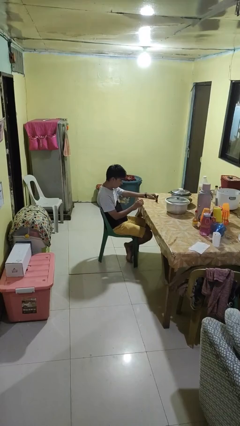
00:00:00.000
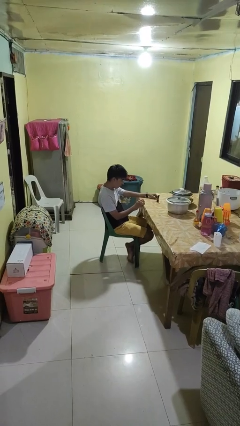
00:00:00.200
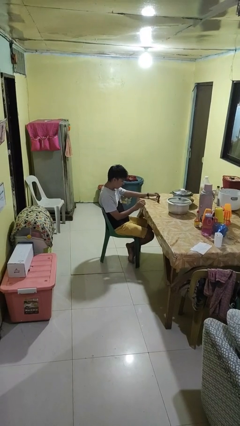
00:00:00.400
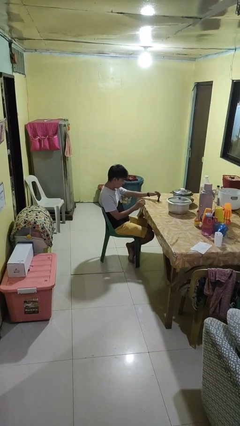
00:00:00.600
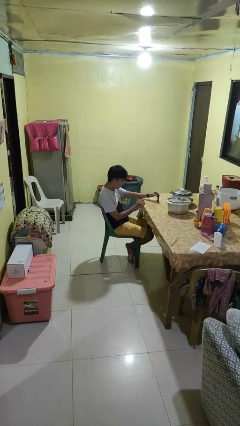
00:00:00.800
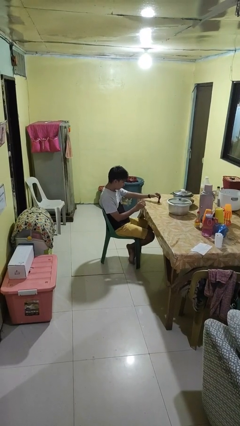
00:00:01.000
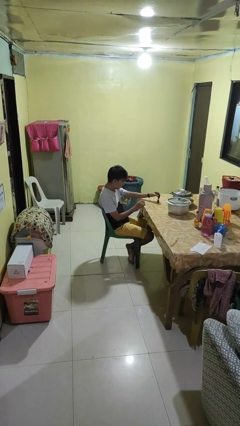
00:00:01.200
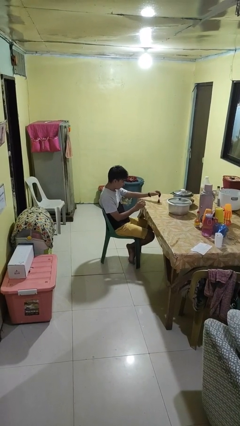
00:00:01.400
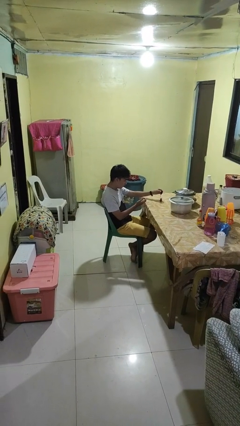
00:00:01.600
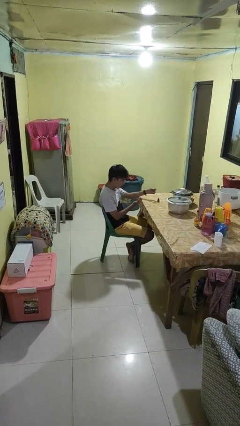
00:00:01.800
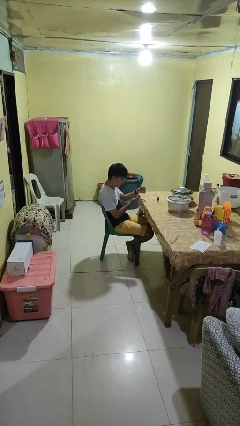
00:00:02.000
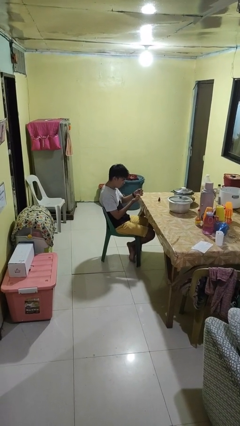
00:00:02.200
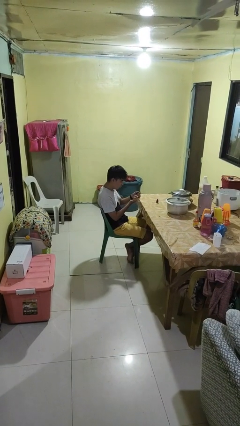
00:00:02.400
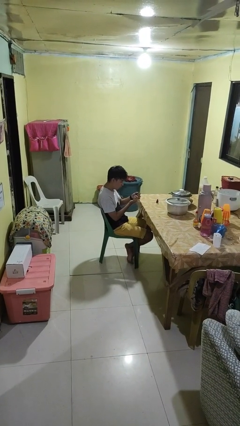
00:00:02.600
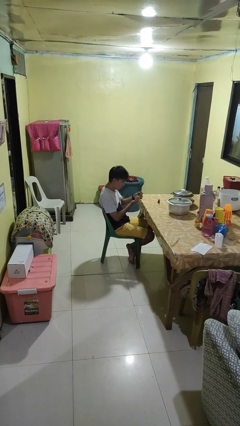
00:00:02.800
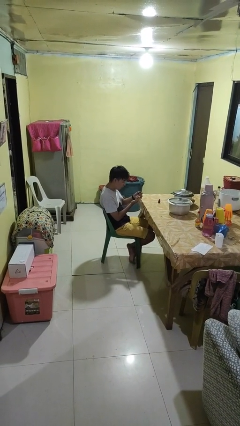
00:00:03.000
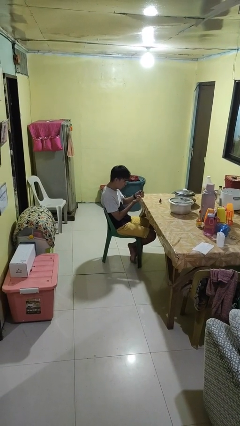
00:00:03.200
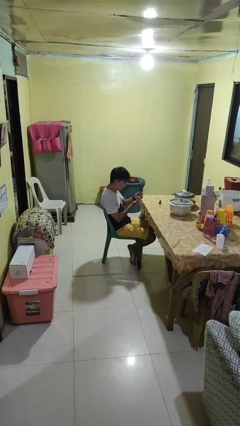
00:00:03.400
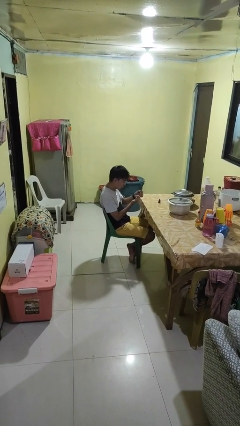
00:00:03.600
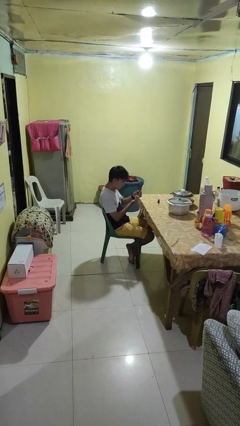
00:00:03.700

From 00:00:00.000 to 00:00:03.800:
person paints fingernails

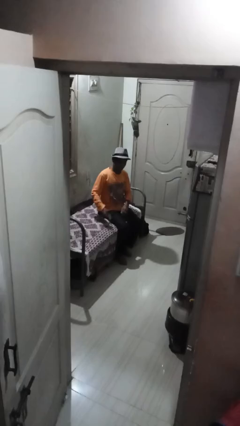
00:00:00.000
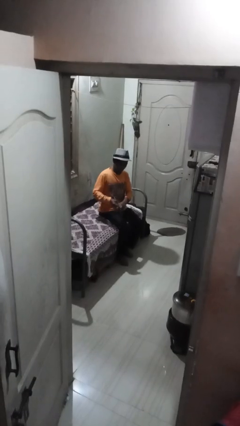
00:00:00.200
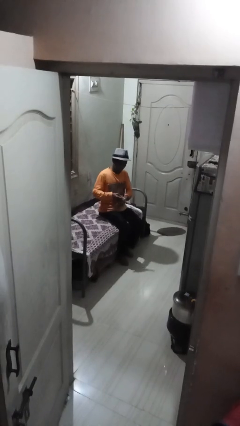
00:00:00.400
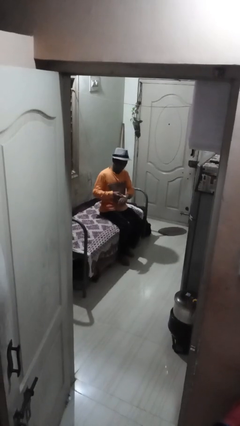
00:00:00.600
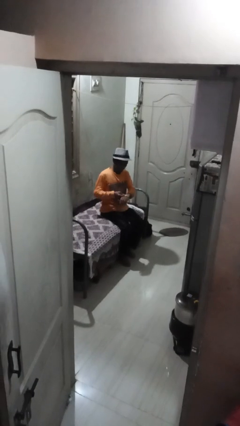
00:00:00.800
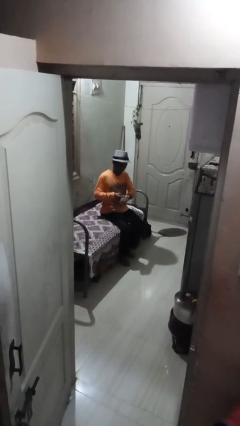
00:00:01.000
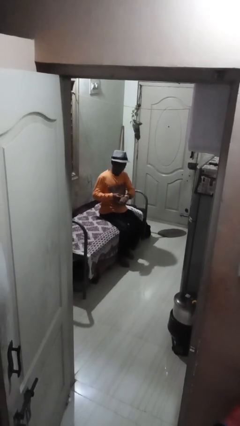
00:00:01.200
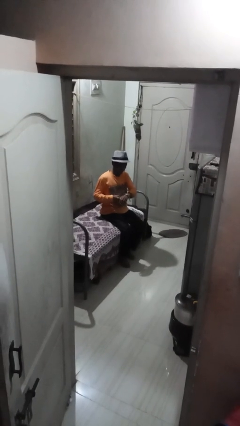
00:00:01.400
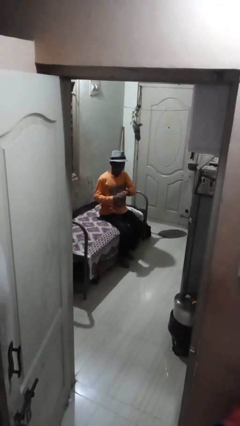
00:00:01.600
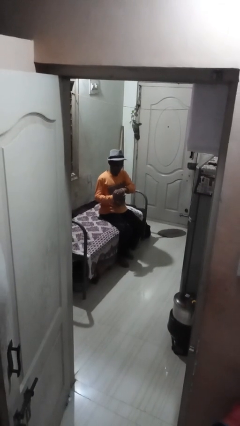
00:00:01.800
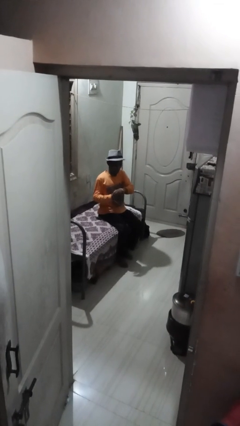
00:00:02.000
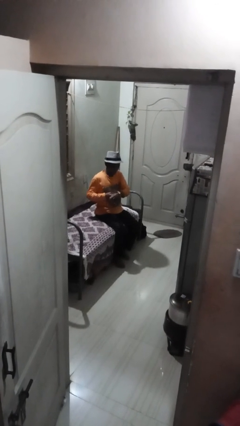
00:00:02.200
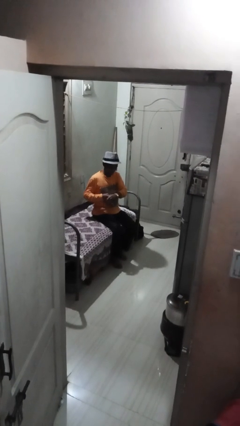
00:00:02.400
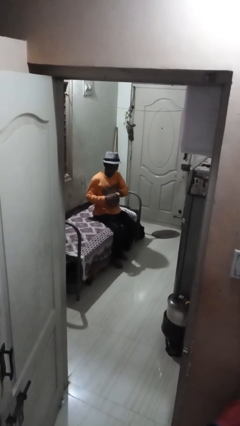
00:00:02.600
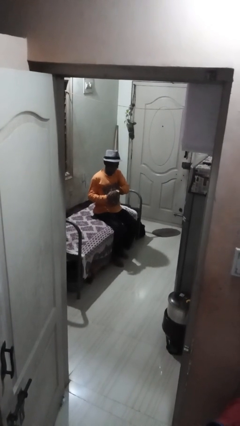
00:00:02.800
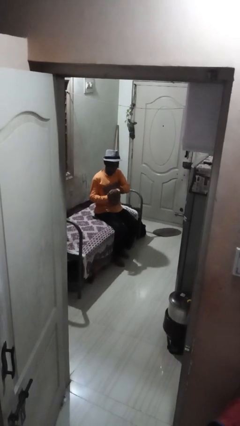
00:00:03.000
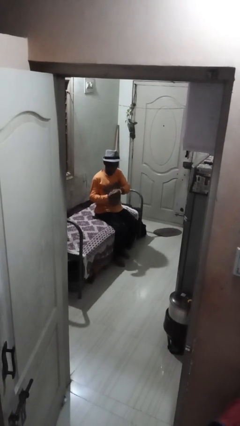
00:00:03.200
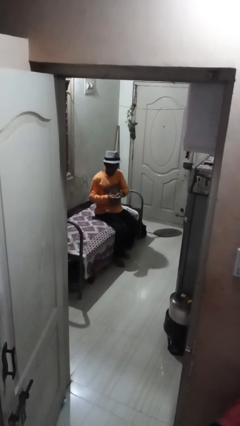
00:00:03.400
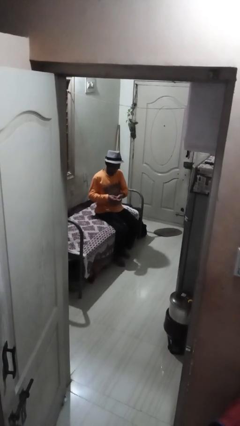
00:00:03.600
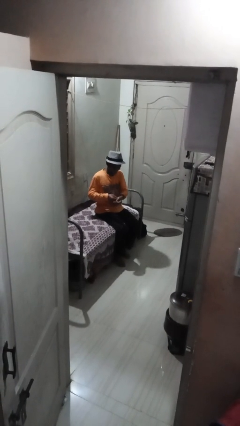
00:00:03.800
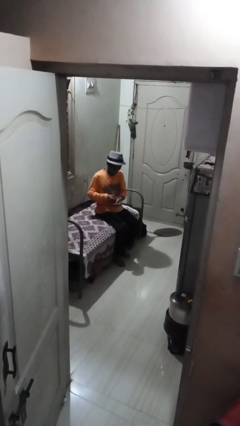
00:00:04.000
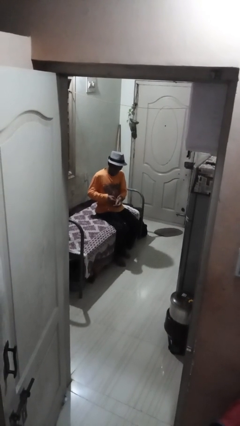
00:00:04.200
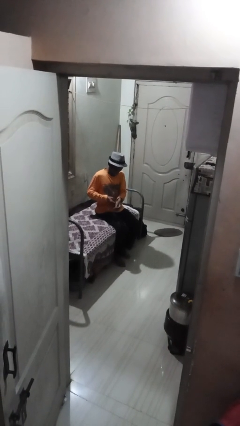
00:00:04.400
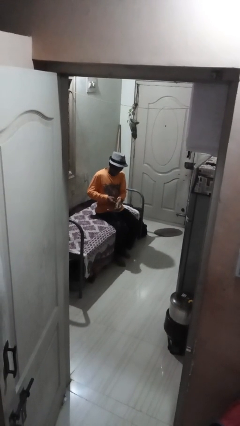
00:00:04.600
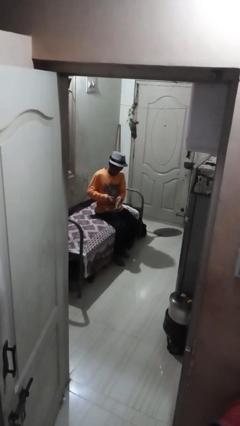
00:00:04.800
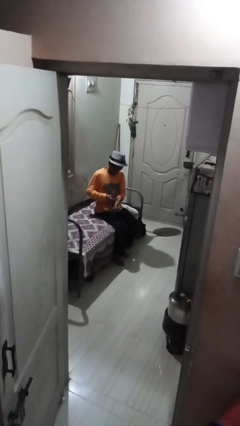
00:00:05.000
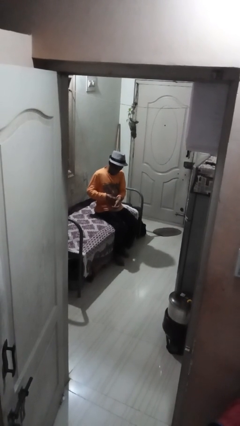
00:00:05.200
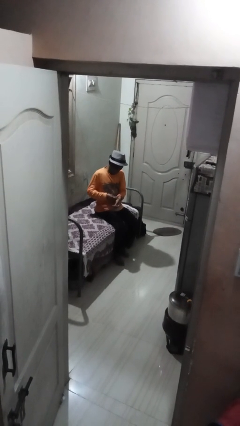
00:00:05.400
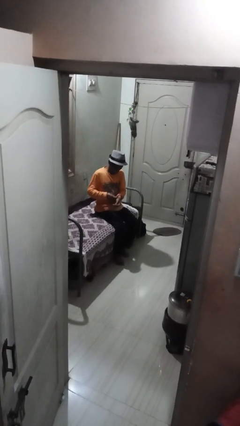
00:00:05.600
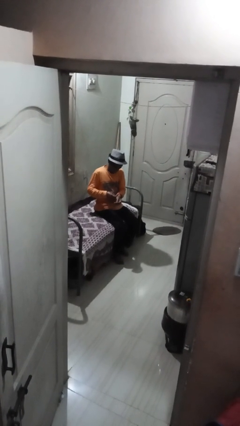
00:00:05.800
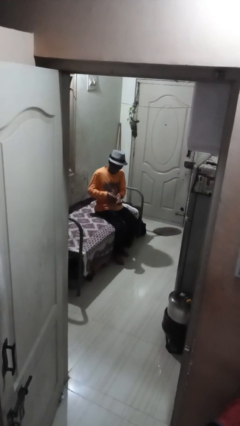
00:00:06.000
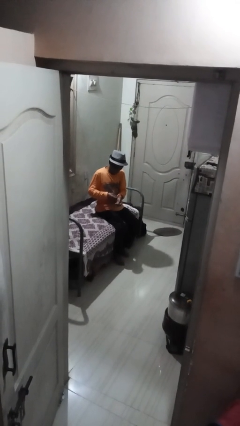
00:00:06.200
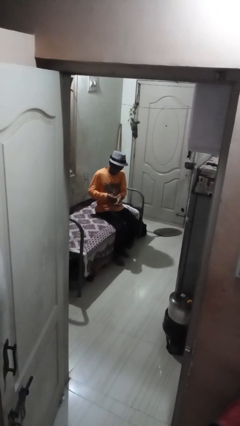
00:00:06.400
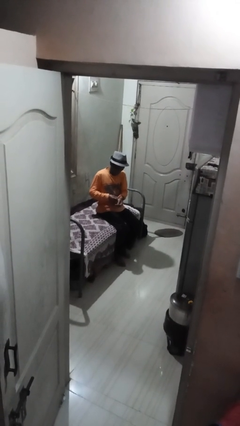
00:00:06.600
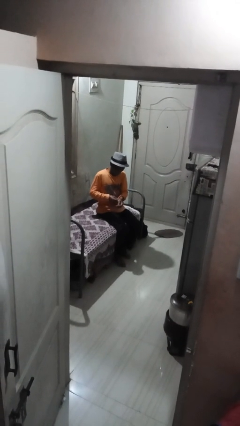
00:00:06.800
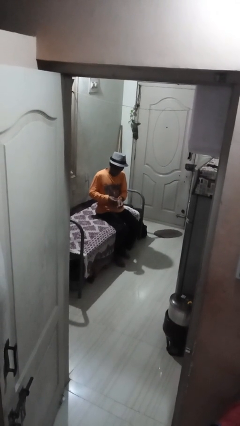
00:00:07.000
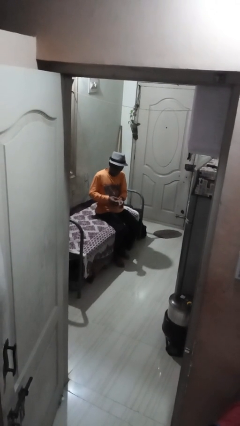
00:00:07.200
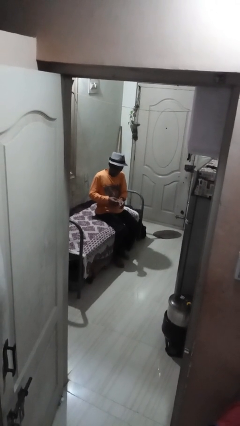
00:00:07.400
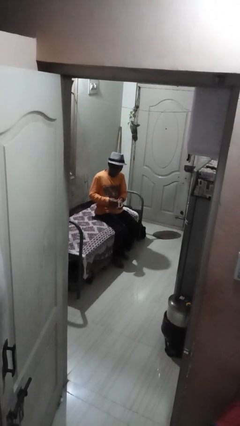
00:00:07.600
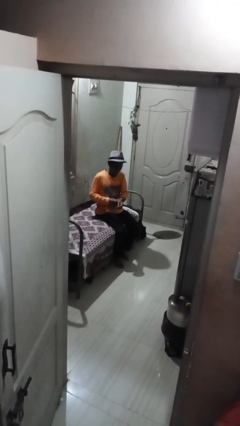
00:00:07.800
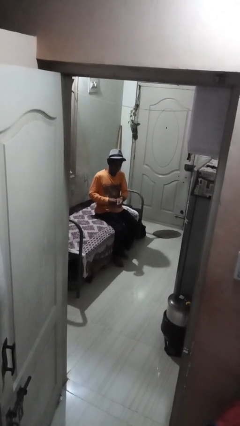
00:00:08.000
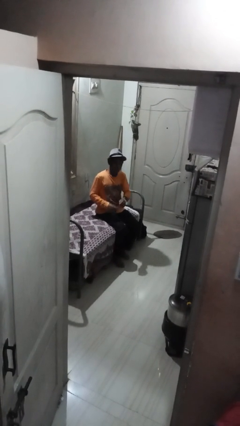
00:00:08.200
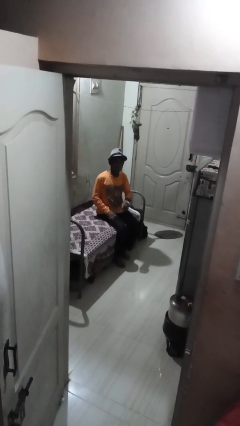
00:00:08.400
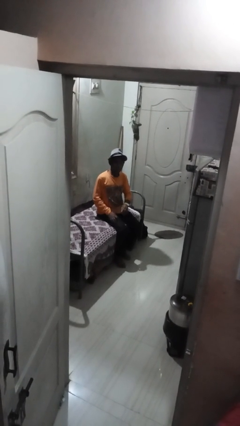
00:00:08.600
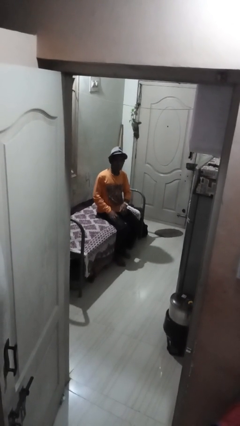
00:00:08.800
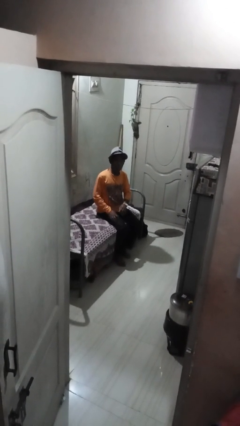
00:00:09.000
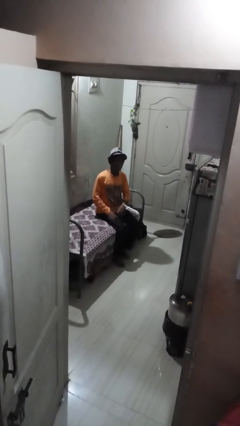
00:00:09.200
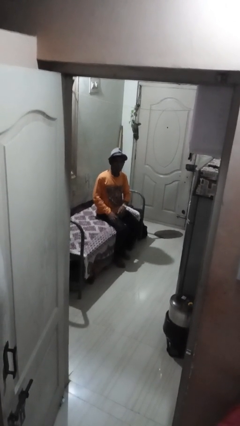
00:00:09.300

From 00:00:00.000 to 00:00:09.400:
person puts on wristwatch

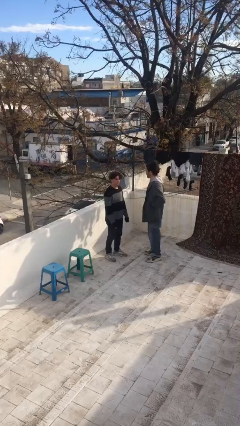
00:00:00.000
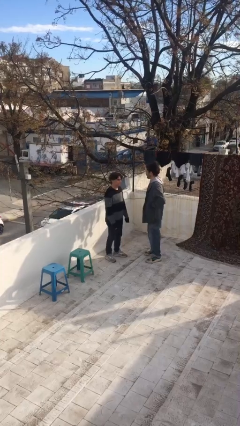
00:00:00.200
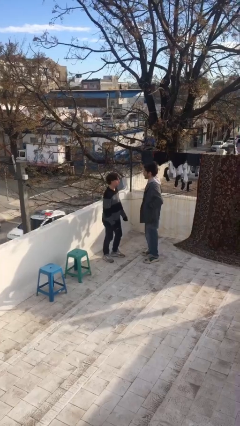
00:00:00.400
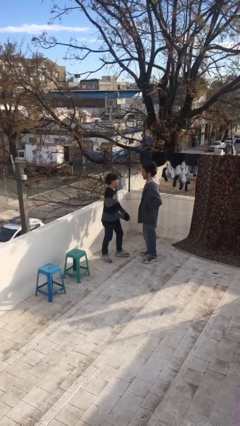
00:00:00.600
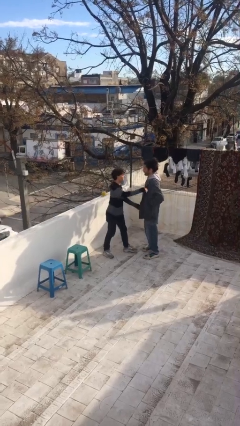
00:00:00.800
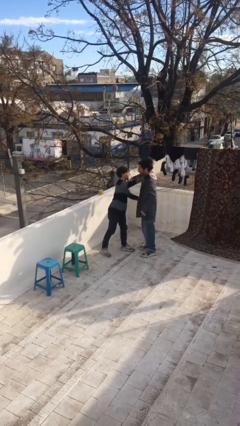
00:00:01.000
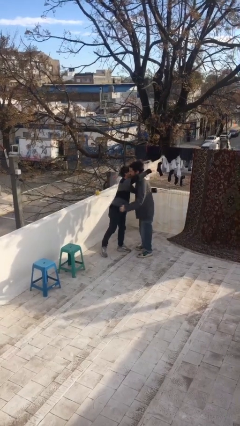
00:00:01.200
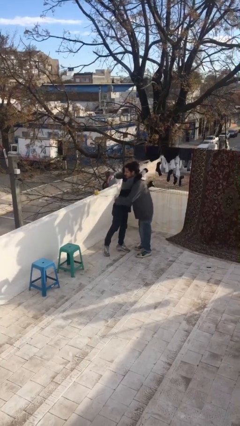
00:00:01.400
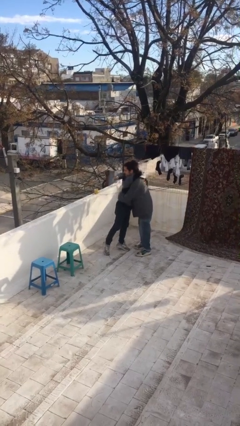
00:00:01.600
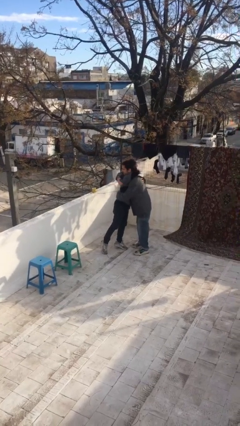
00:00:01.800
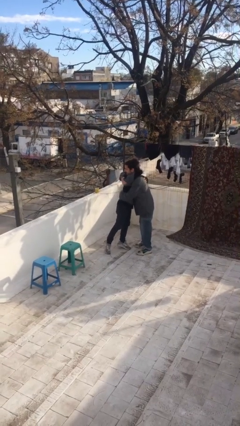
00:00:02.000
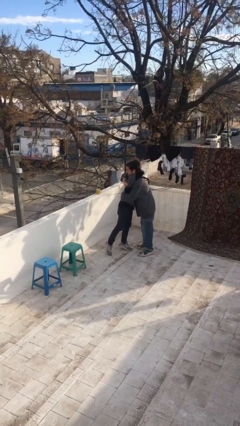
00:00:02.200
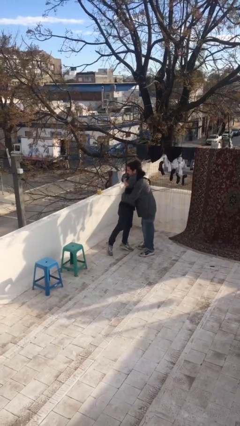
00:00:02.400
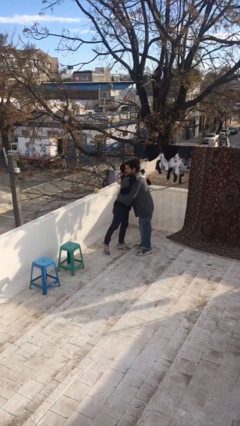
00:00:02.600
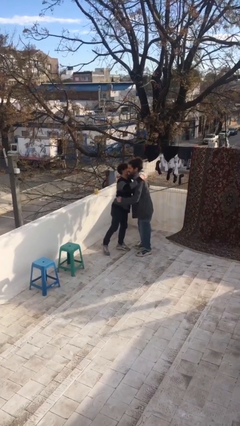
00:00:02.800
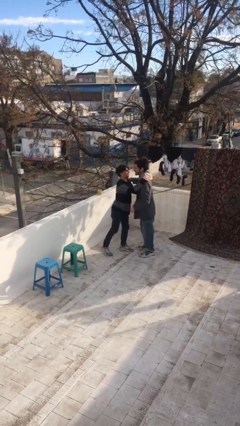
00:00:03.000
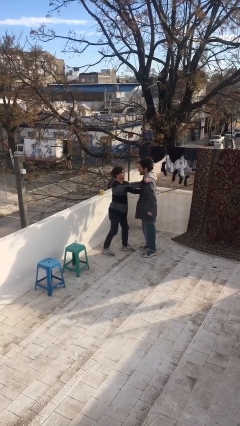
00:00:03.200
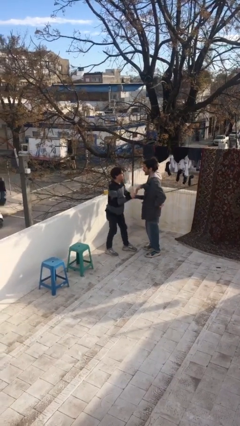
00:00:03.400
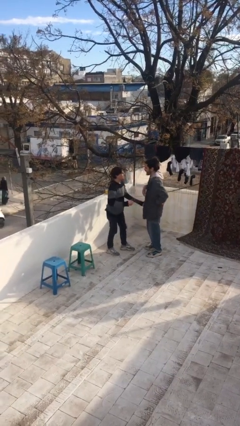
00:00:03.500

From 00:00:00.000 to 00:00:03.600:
person embraces person

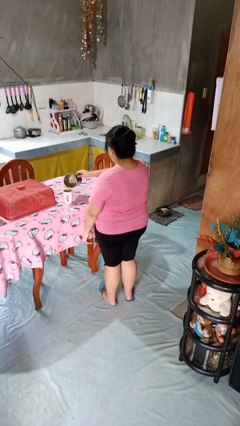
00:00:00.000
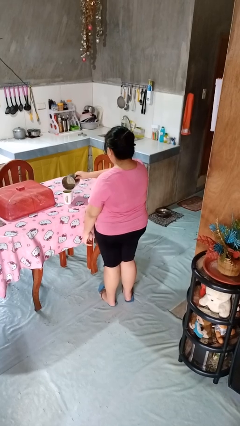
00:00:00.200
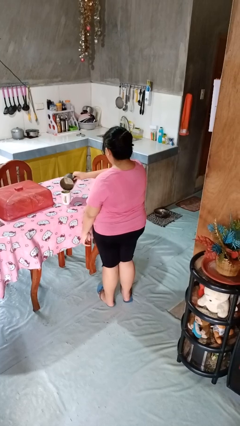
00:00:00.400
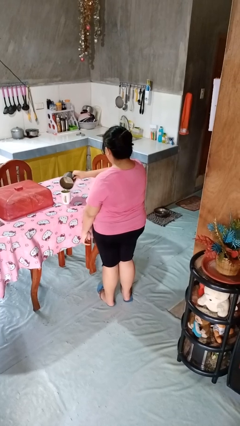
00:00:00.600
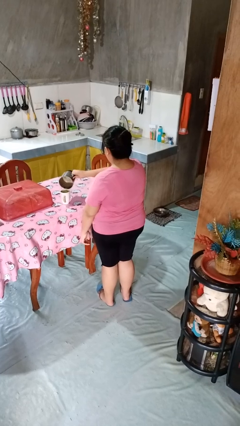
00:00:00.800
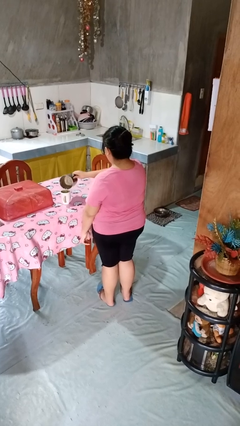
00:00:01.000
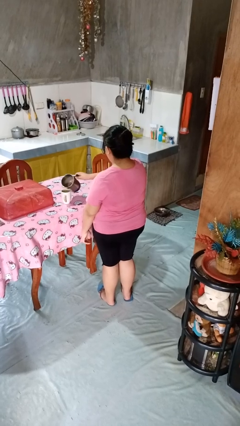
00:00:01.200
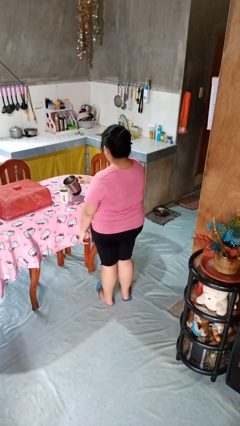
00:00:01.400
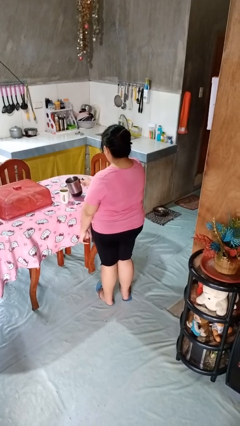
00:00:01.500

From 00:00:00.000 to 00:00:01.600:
person pours coffee into mug
